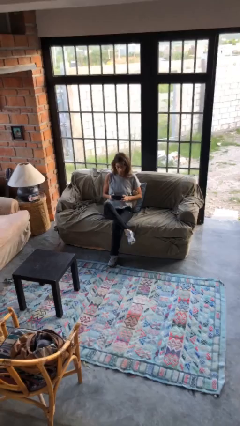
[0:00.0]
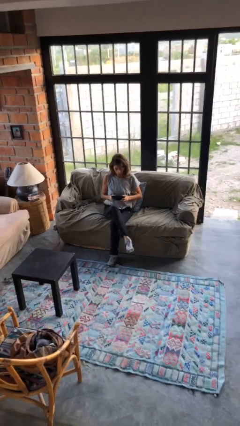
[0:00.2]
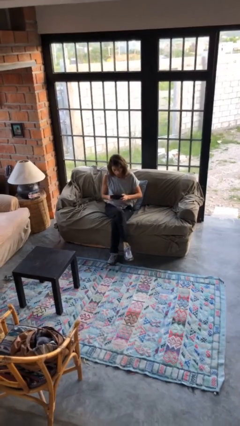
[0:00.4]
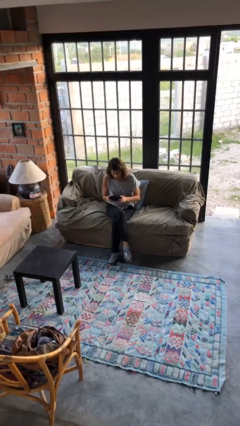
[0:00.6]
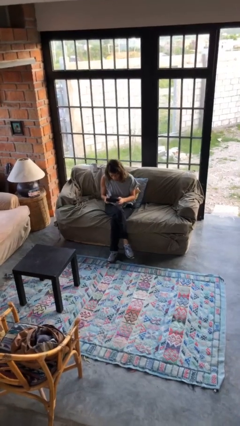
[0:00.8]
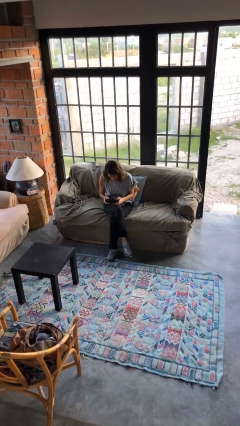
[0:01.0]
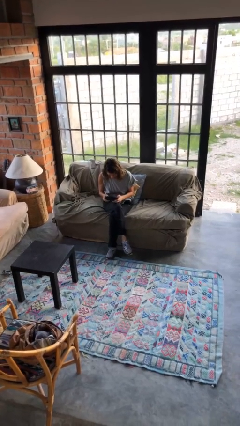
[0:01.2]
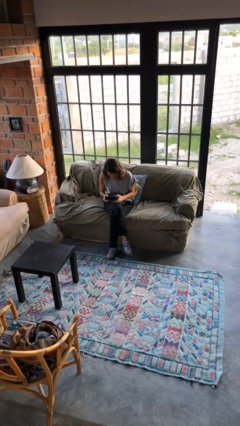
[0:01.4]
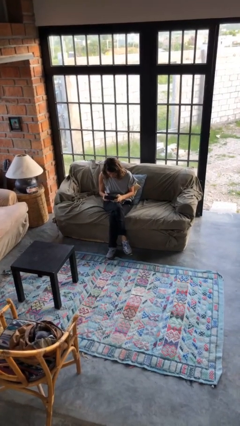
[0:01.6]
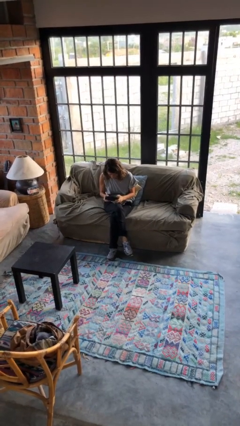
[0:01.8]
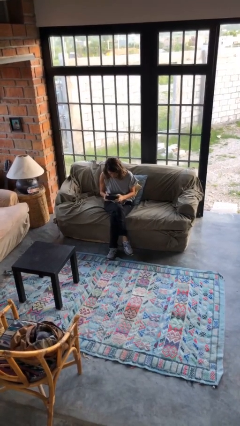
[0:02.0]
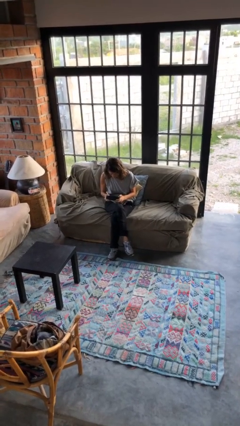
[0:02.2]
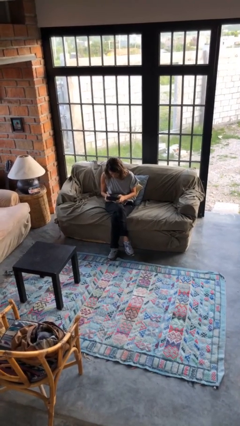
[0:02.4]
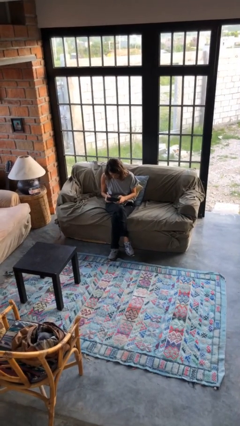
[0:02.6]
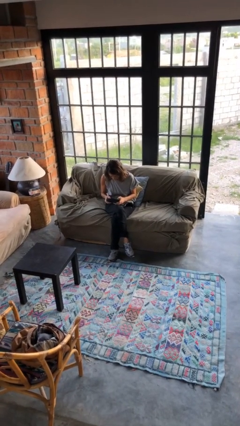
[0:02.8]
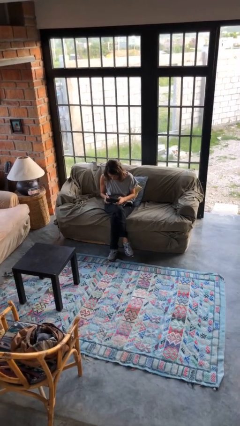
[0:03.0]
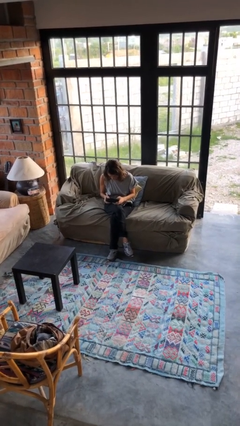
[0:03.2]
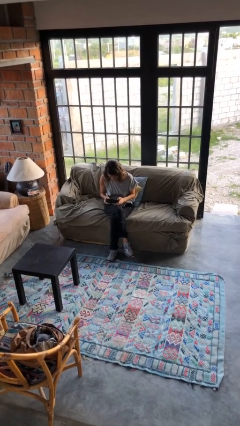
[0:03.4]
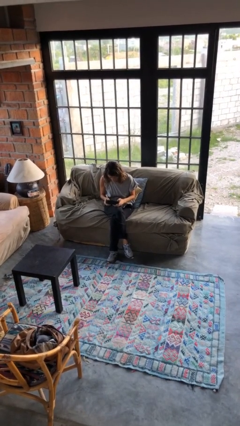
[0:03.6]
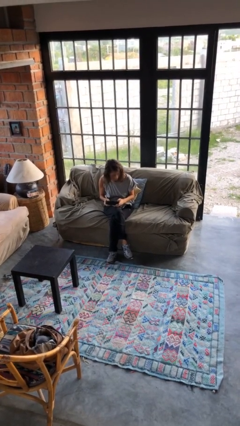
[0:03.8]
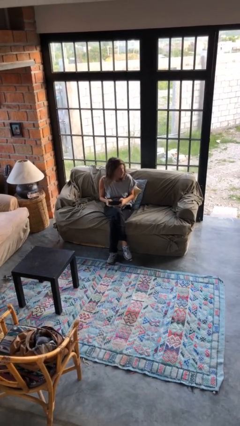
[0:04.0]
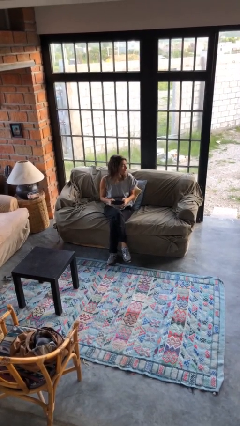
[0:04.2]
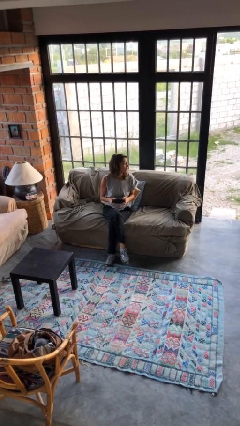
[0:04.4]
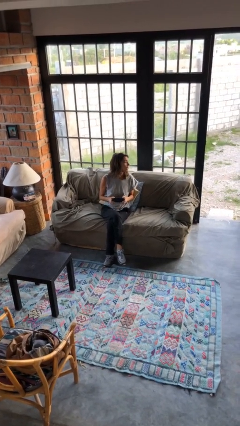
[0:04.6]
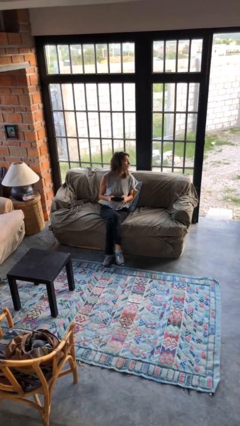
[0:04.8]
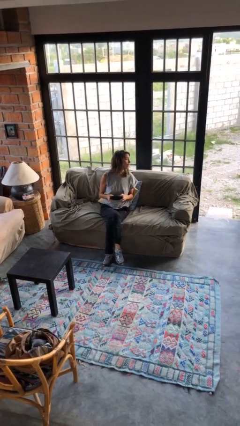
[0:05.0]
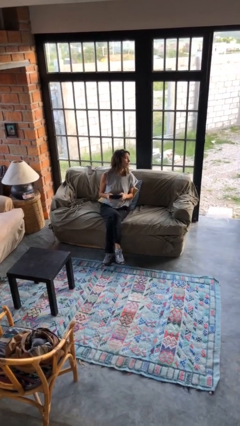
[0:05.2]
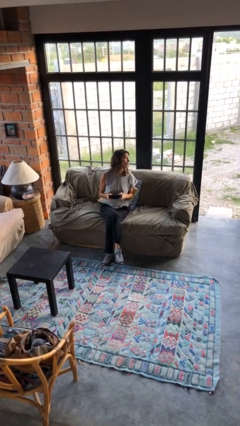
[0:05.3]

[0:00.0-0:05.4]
person interacts with handheld game

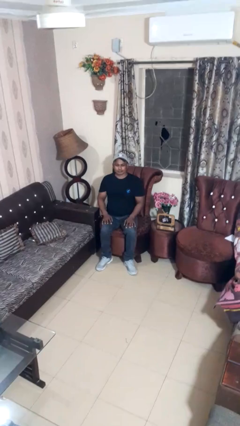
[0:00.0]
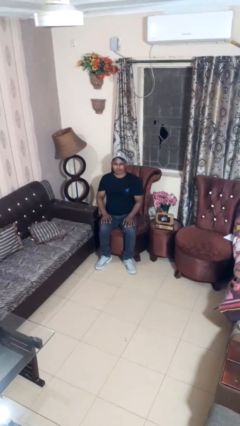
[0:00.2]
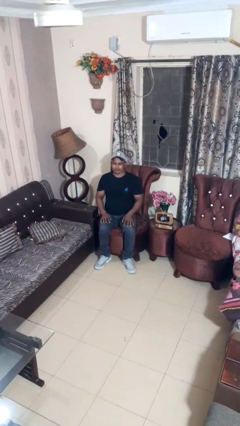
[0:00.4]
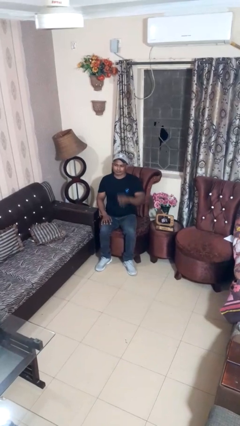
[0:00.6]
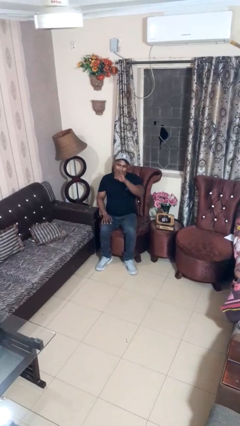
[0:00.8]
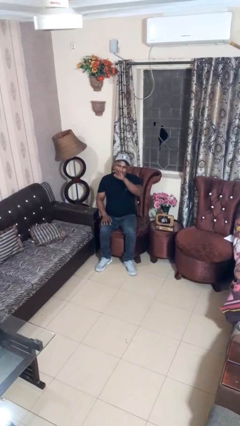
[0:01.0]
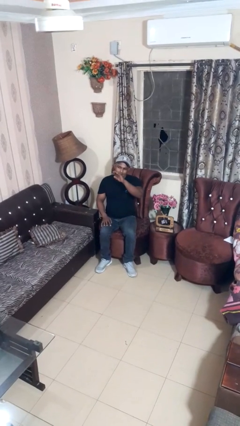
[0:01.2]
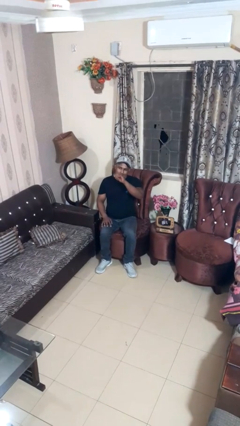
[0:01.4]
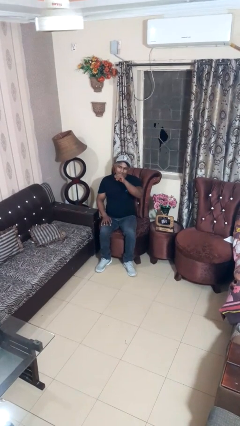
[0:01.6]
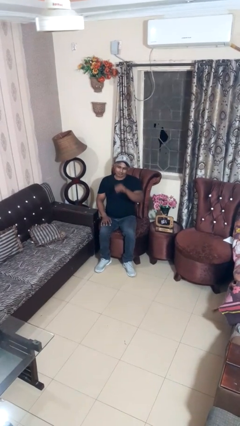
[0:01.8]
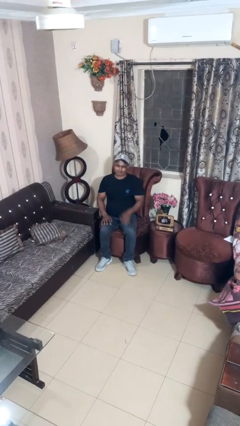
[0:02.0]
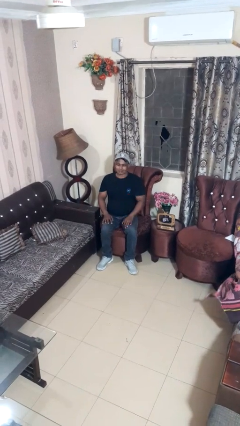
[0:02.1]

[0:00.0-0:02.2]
person gestures come here

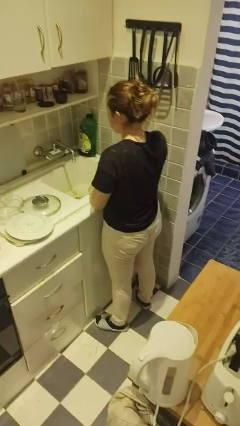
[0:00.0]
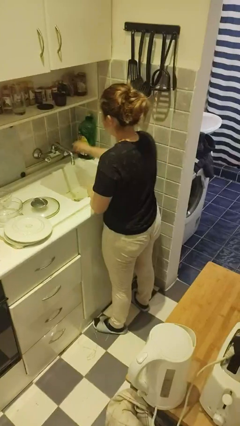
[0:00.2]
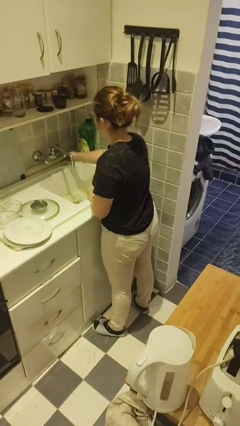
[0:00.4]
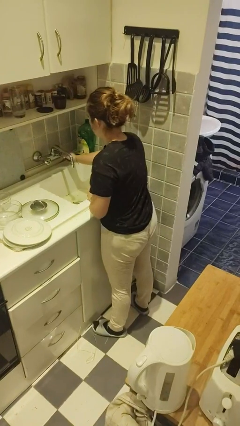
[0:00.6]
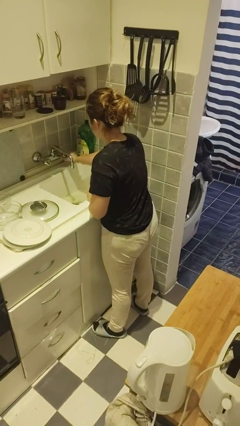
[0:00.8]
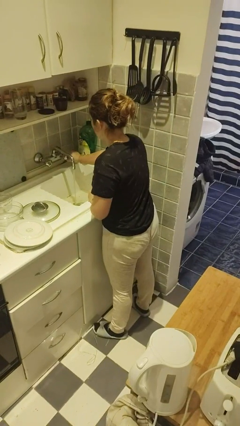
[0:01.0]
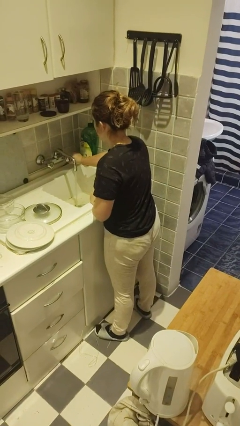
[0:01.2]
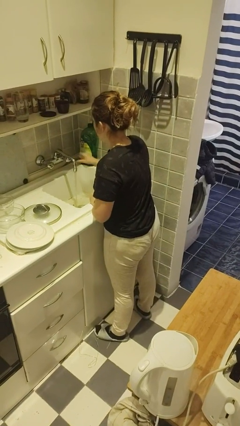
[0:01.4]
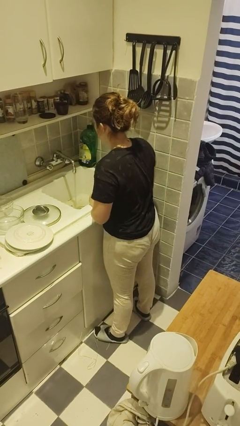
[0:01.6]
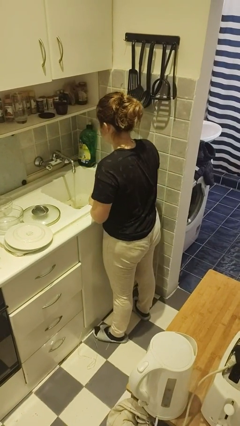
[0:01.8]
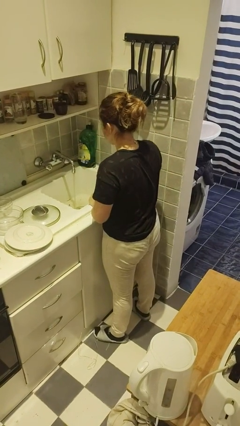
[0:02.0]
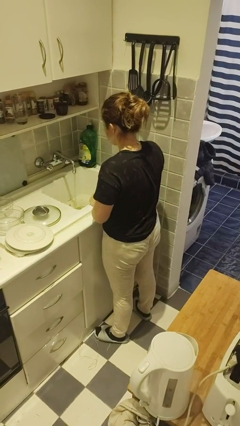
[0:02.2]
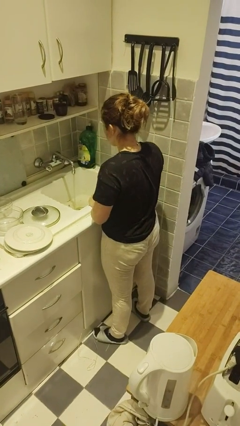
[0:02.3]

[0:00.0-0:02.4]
person turns on faucet

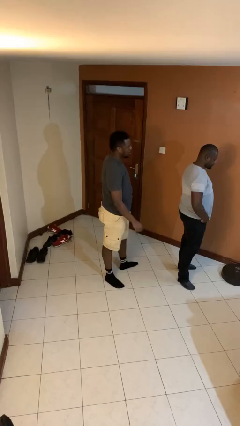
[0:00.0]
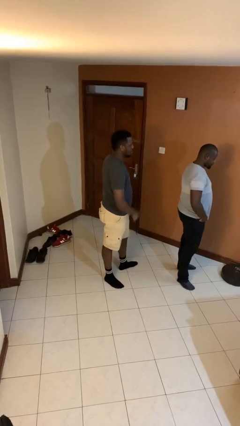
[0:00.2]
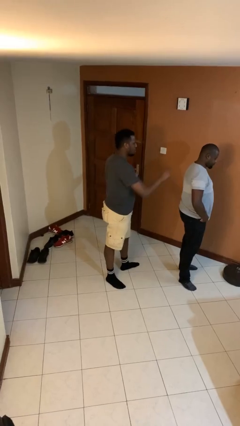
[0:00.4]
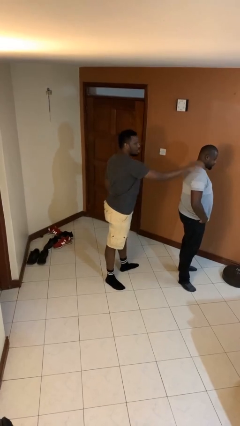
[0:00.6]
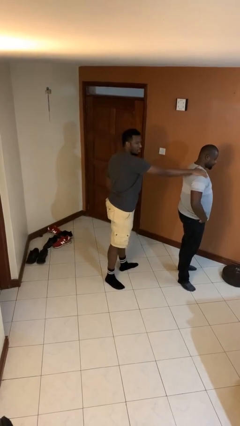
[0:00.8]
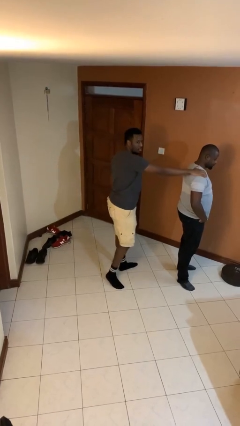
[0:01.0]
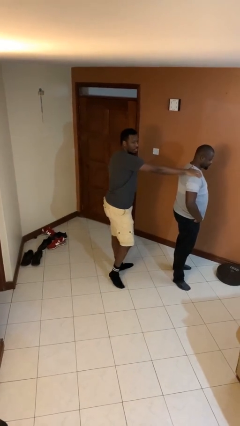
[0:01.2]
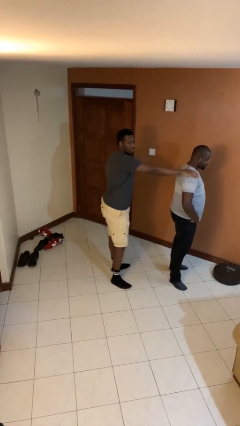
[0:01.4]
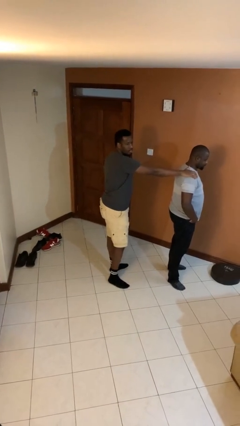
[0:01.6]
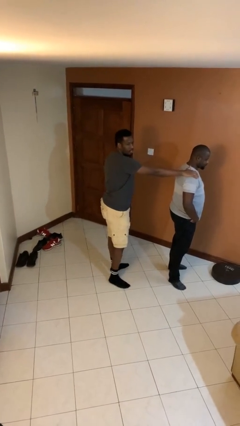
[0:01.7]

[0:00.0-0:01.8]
person grabs person by shoulder

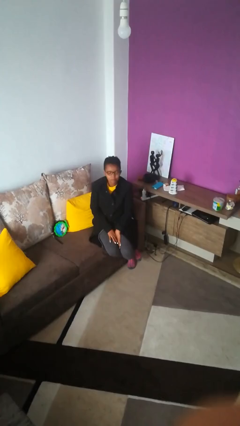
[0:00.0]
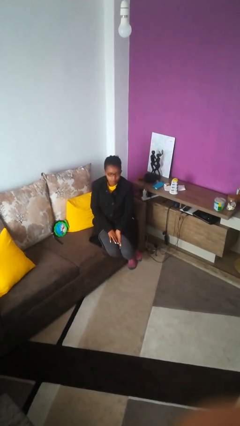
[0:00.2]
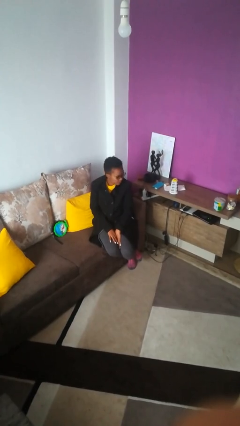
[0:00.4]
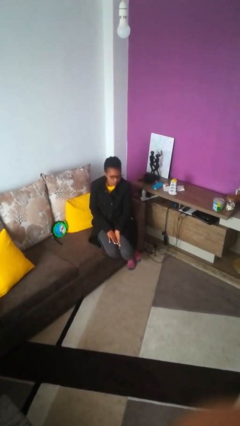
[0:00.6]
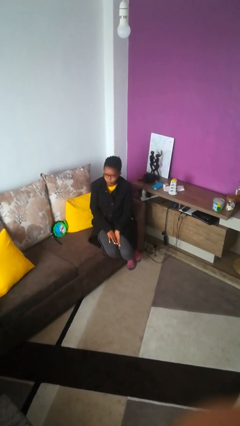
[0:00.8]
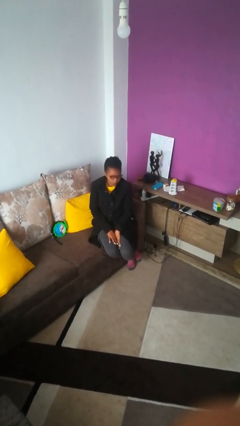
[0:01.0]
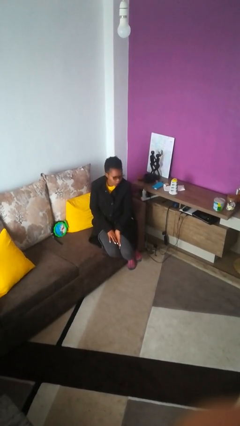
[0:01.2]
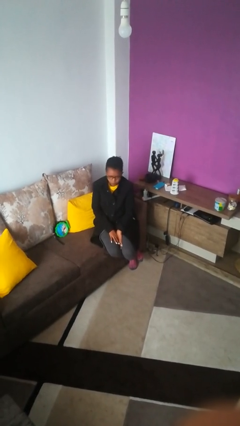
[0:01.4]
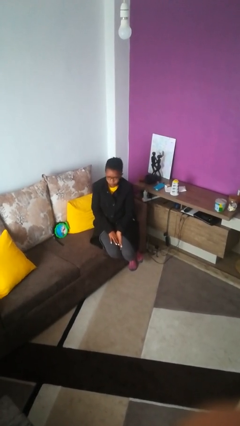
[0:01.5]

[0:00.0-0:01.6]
person shakes head

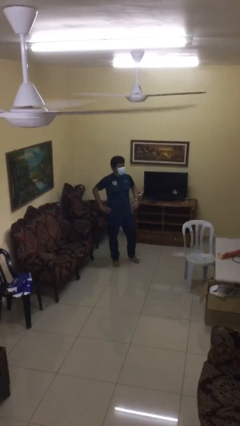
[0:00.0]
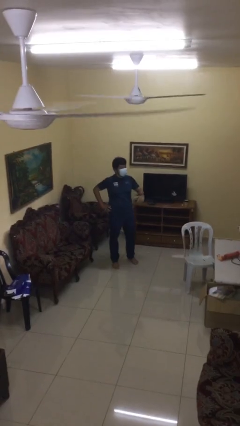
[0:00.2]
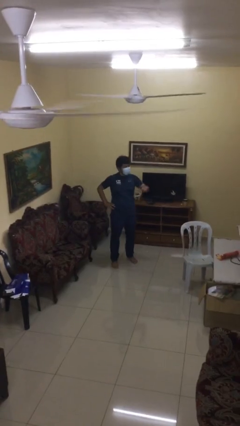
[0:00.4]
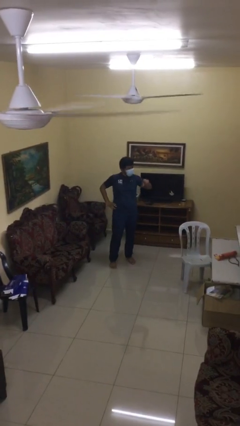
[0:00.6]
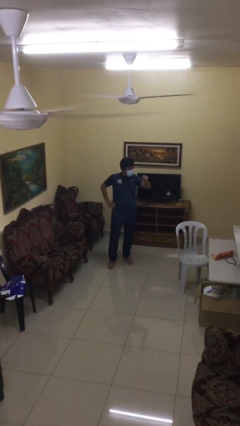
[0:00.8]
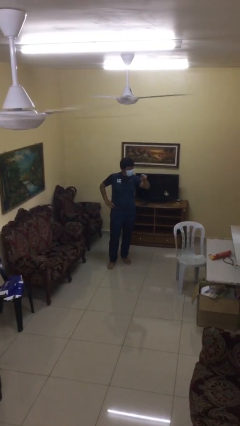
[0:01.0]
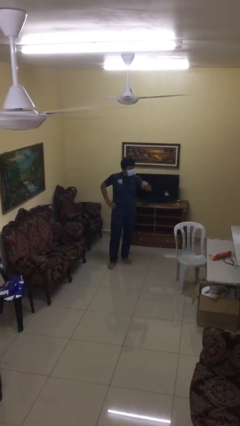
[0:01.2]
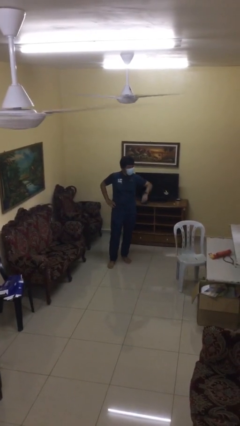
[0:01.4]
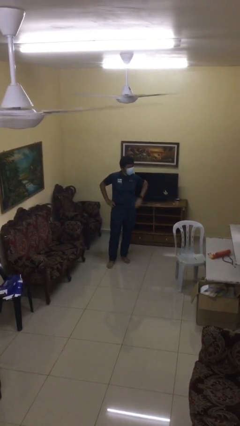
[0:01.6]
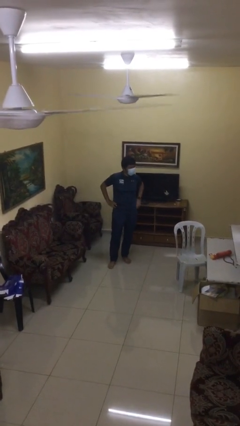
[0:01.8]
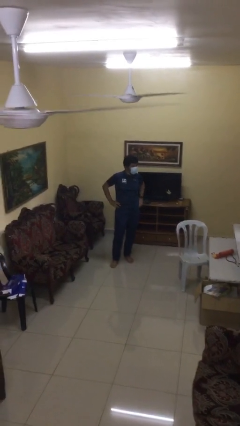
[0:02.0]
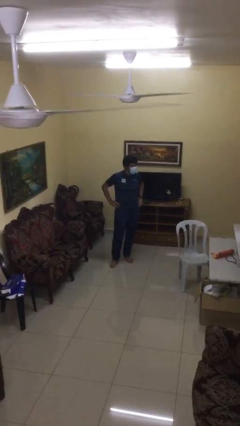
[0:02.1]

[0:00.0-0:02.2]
person points at person
